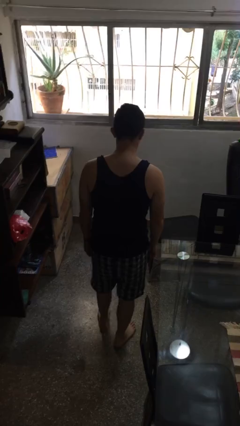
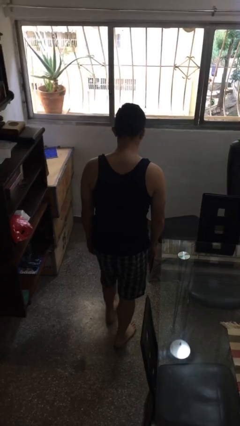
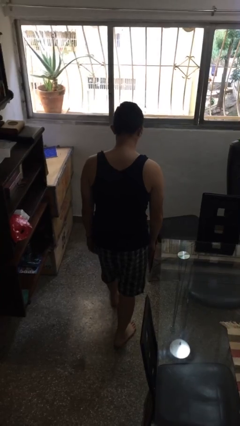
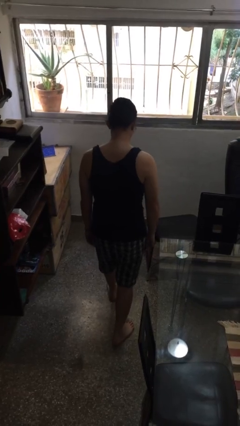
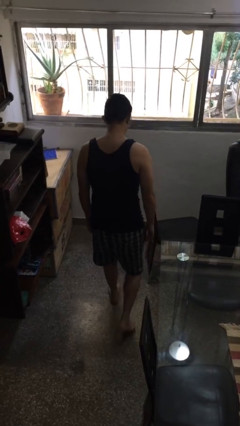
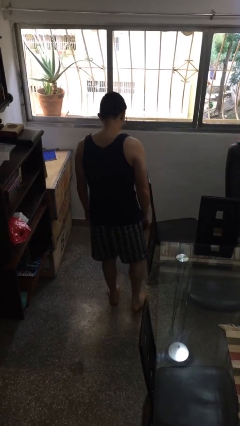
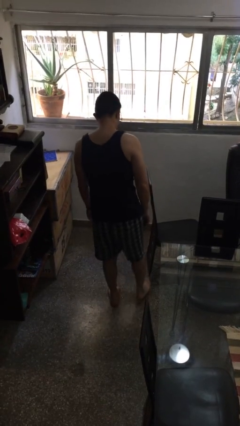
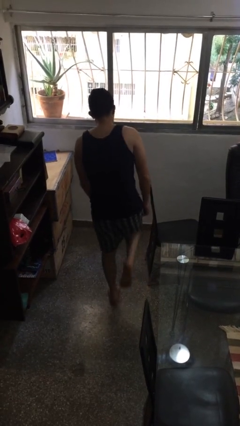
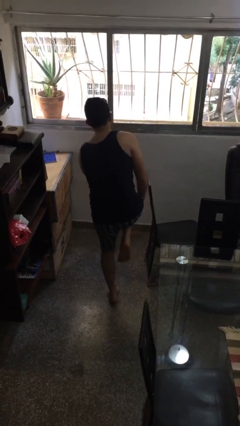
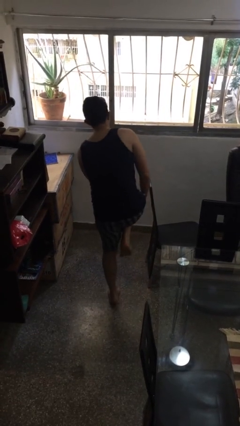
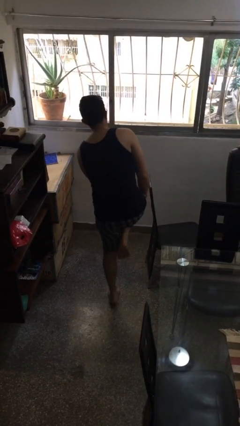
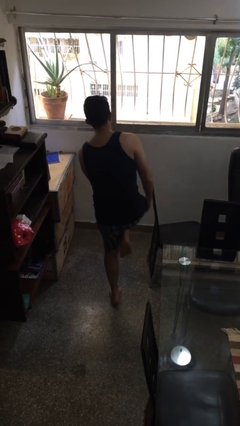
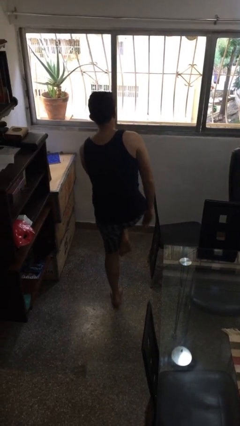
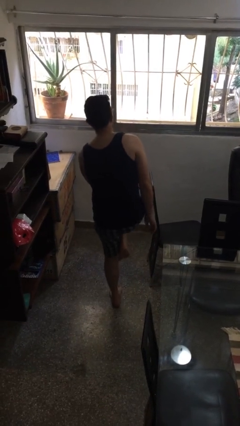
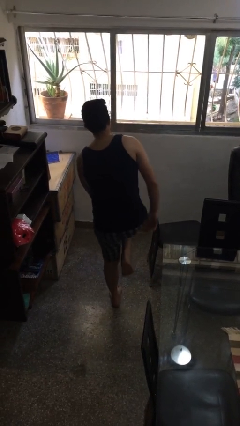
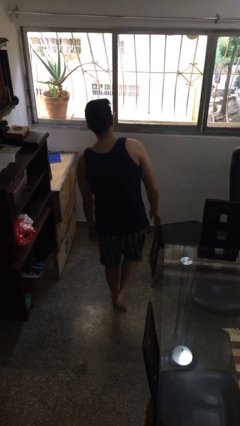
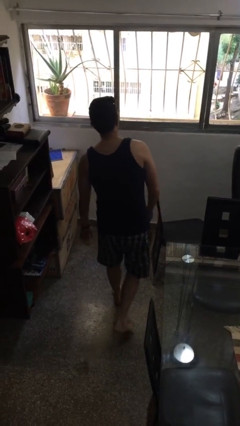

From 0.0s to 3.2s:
person stubs toe

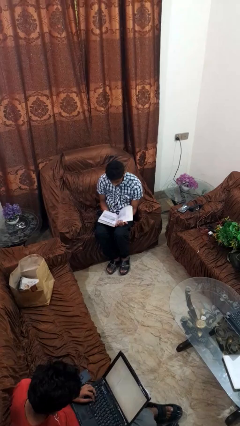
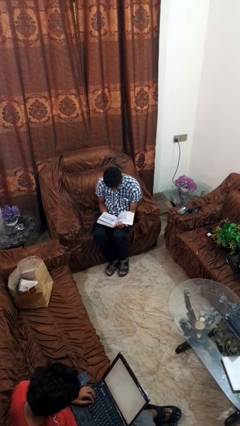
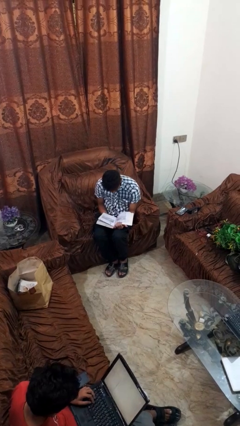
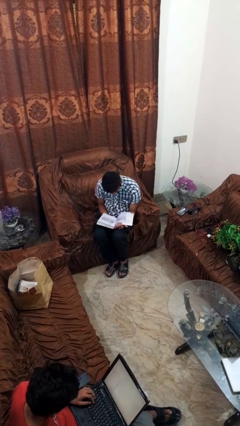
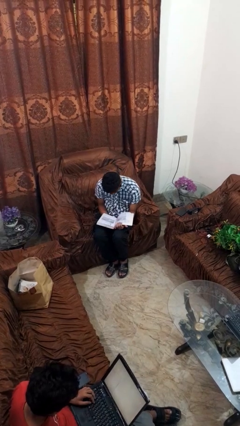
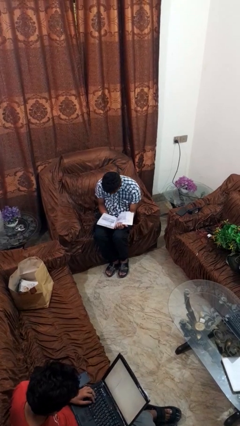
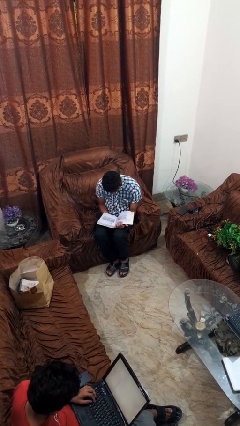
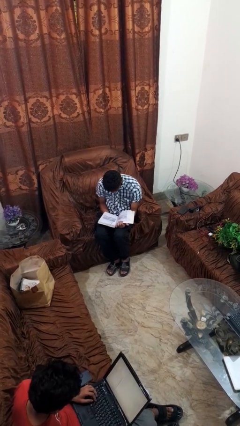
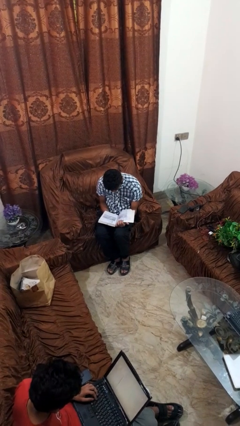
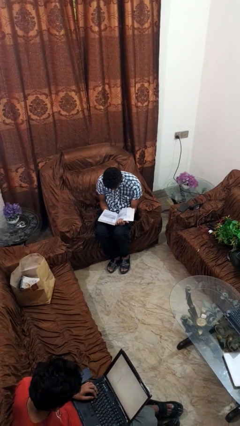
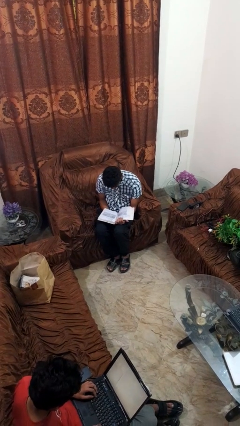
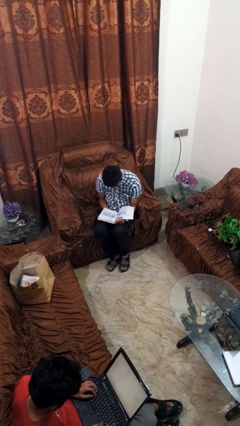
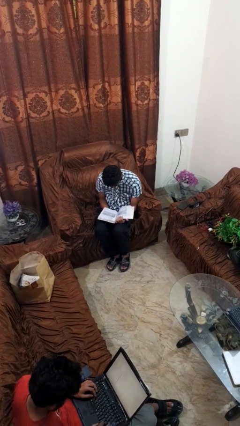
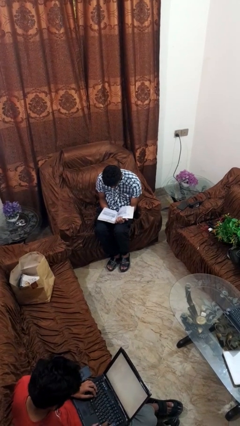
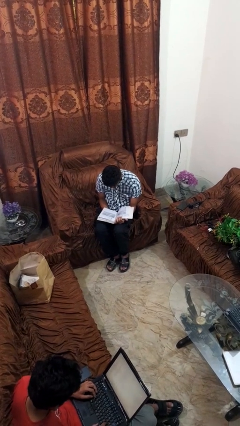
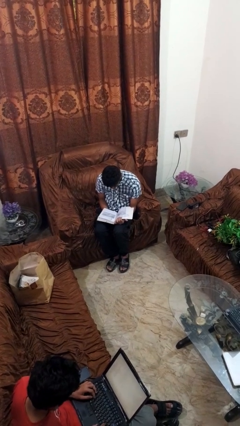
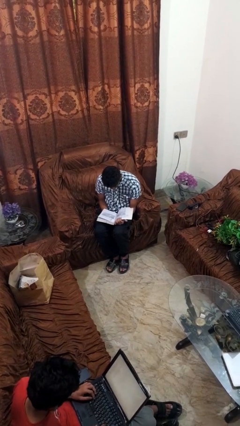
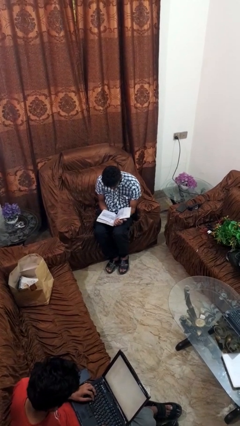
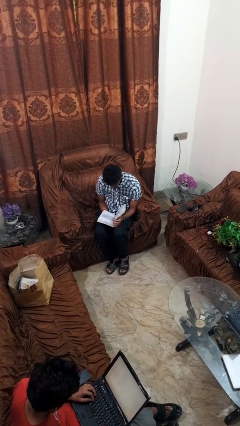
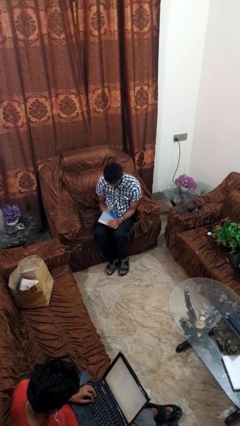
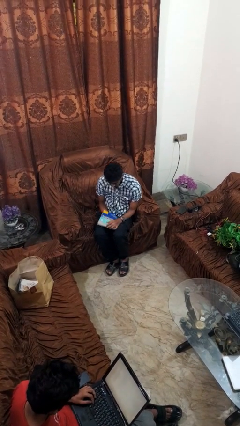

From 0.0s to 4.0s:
person reads book

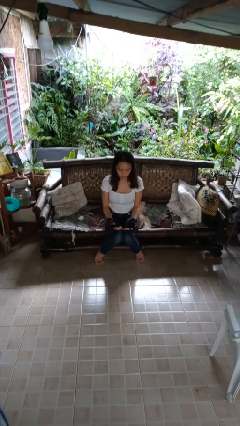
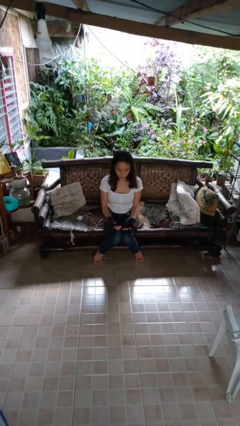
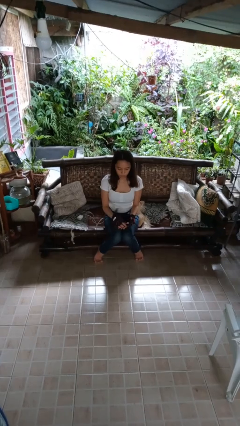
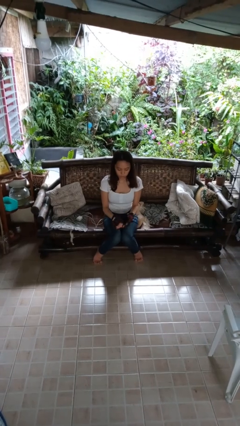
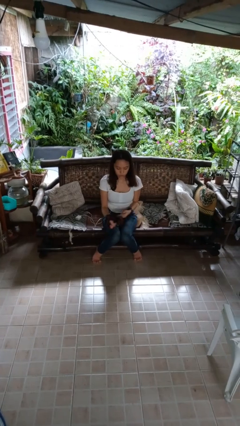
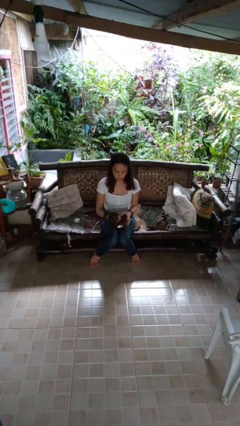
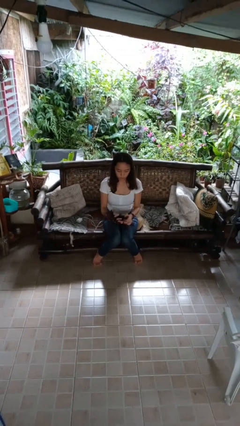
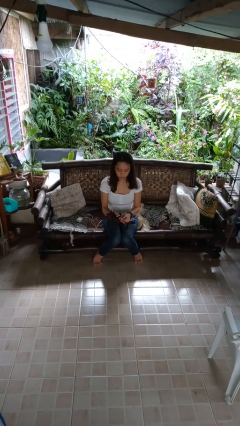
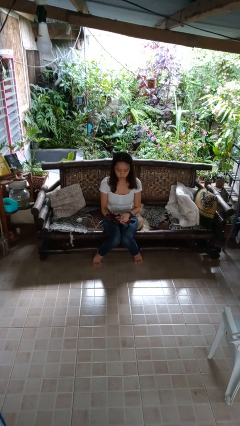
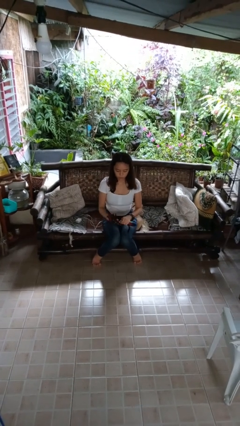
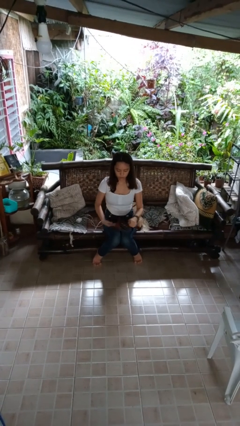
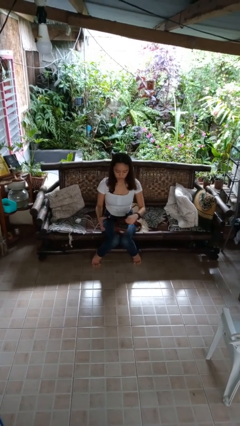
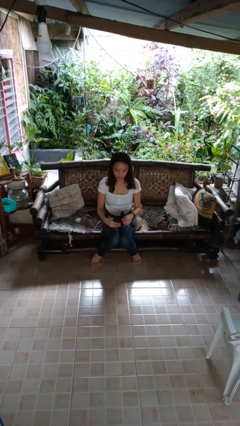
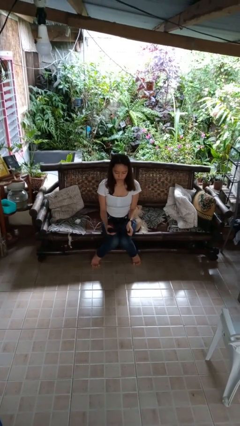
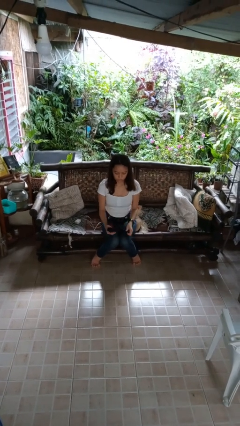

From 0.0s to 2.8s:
person takes off gloves

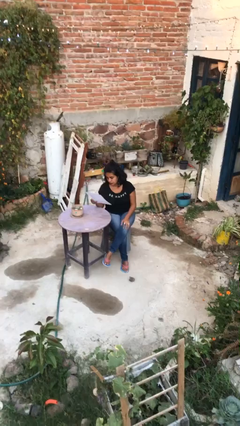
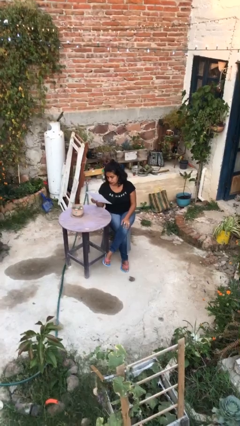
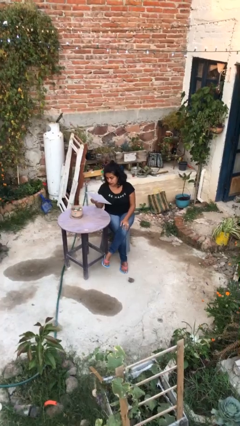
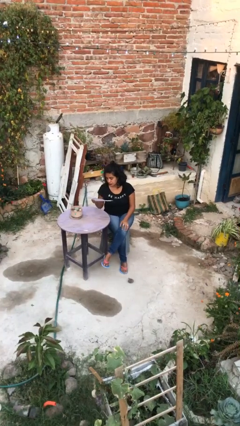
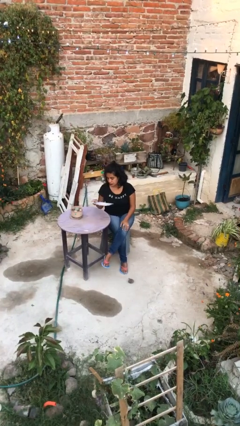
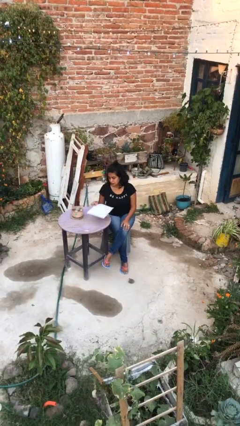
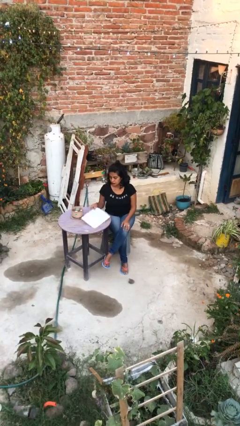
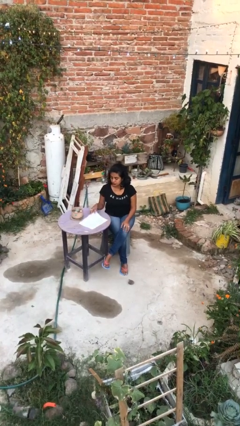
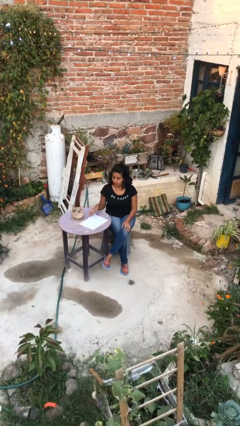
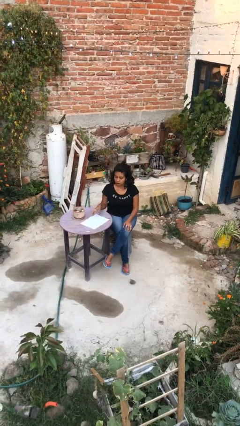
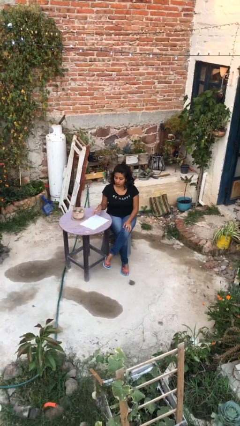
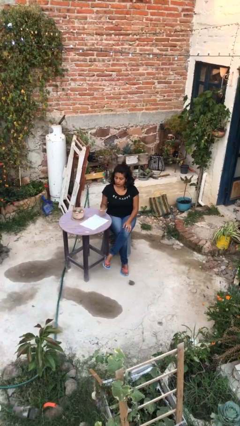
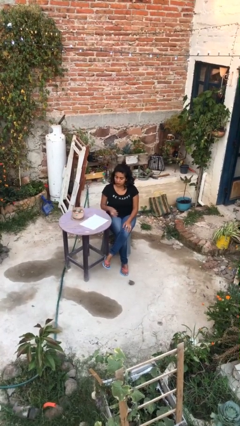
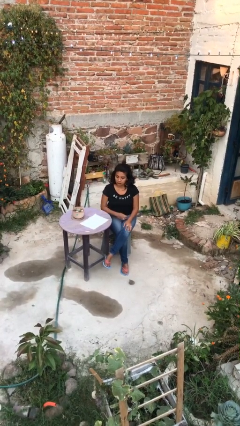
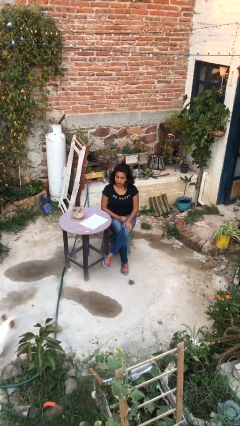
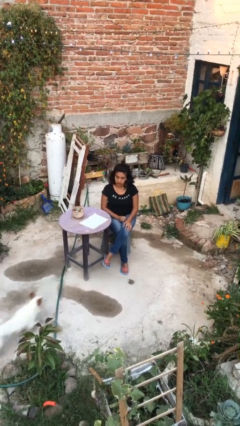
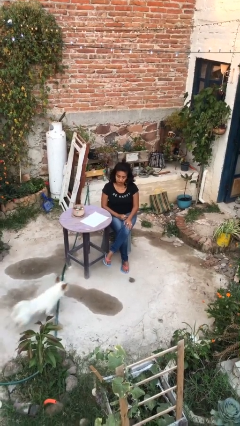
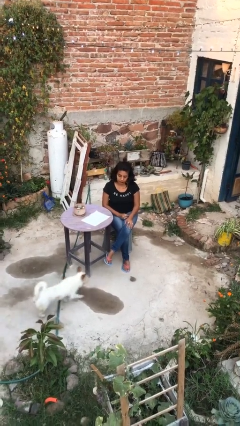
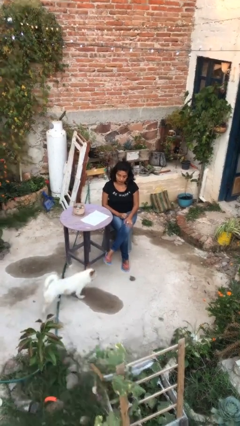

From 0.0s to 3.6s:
person puts down object on table

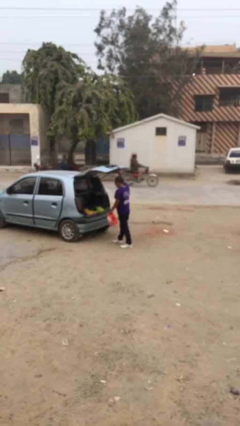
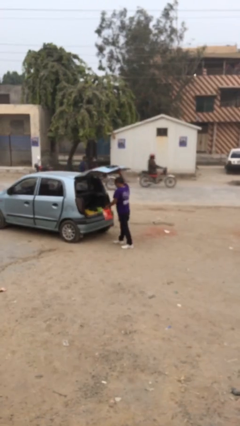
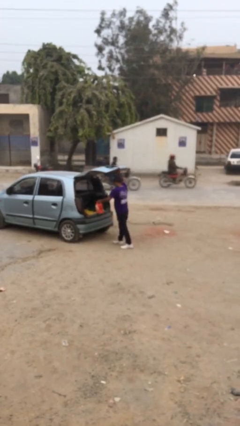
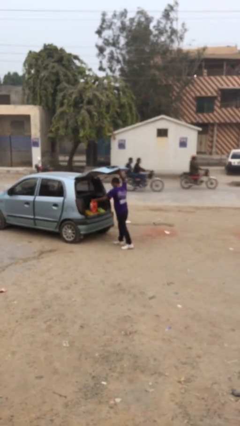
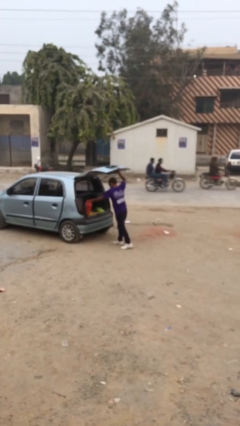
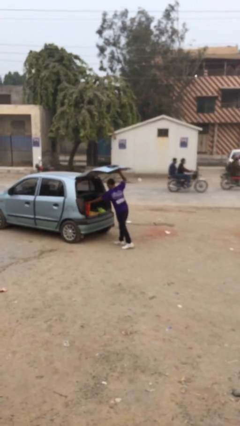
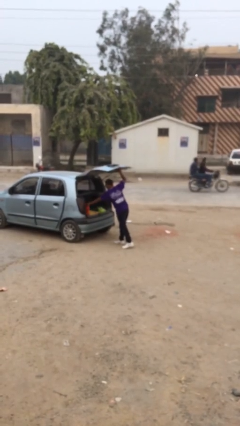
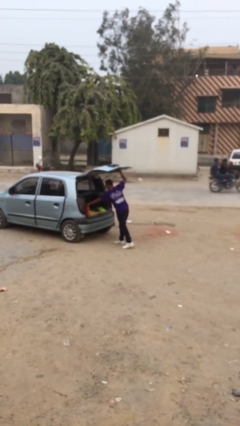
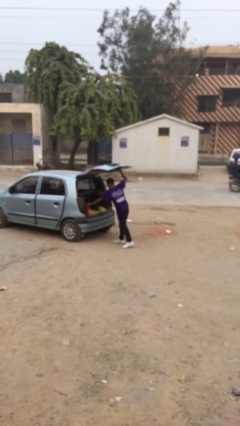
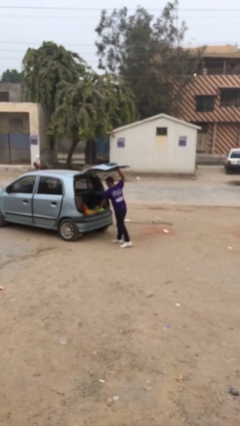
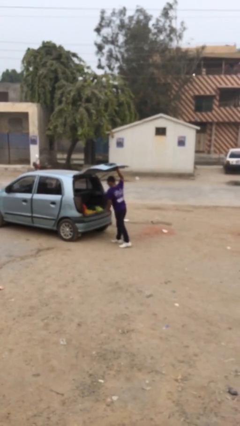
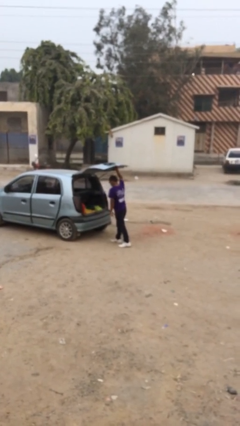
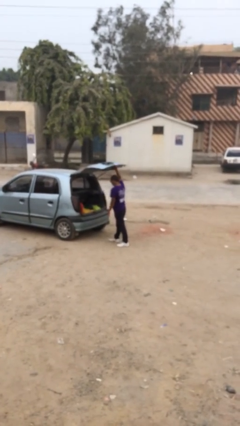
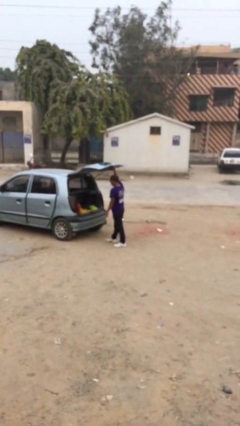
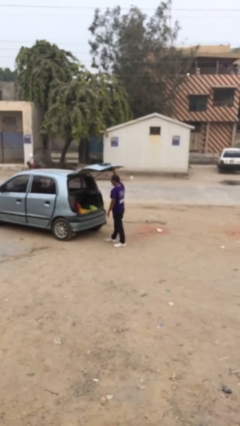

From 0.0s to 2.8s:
person loads car

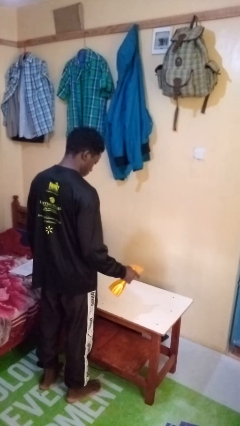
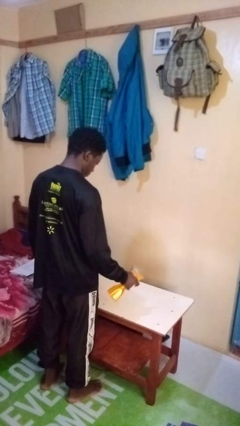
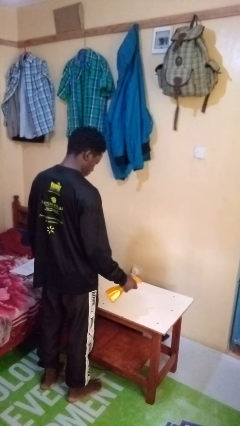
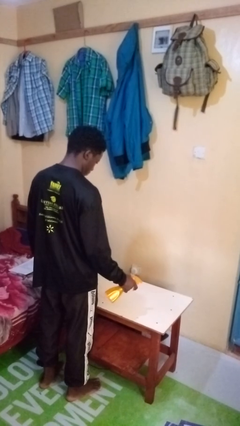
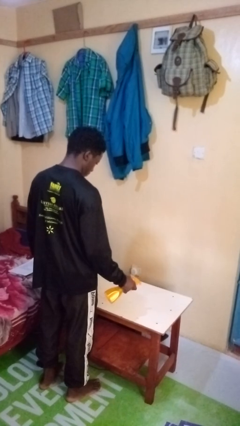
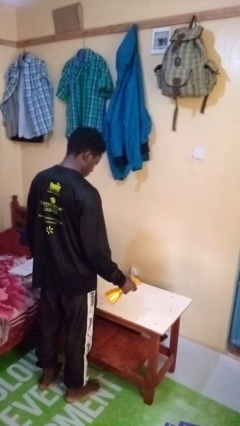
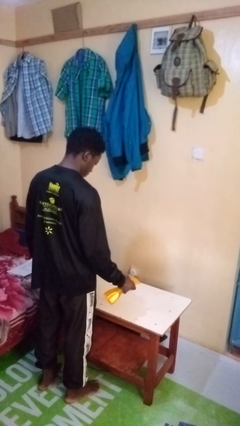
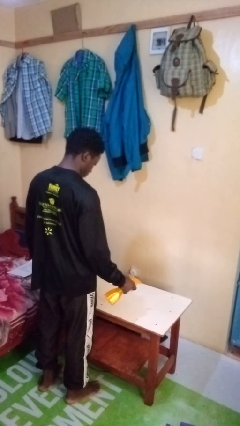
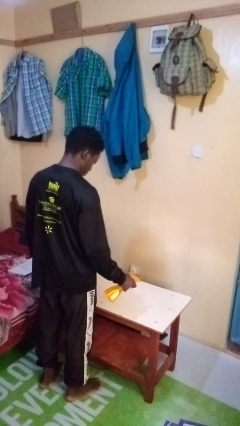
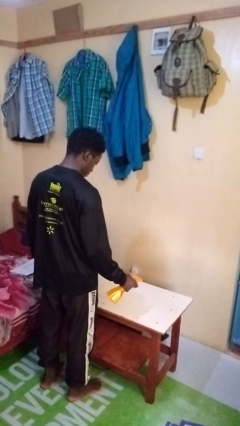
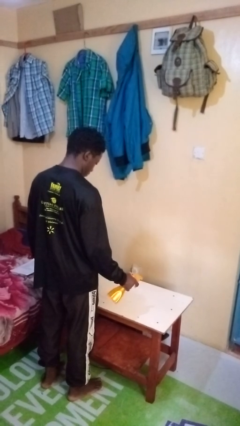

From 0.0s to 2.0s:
person sprays from bottle
